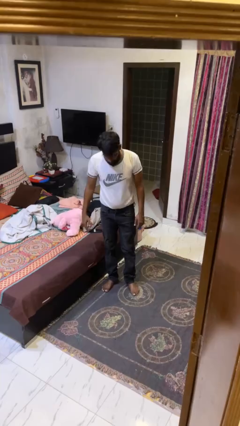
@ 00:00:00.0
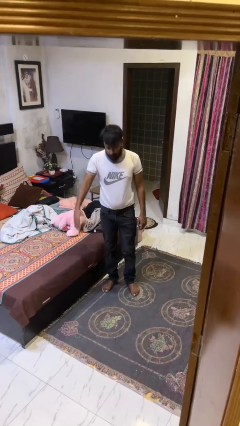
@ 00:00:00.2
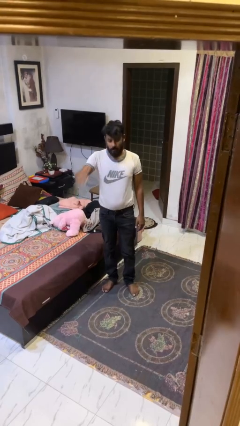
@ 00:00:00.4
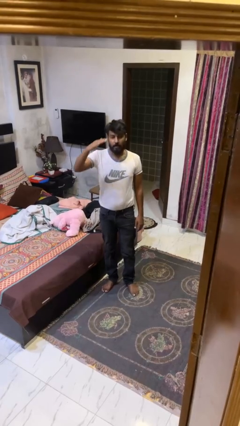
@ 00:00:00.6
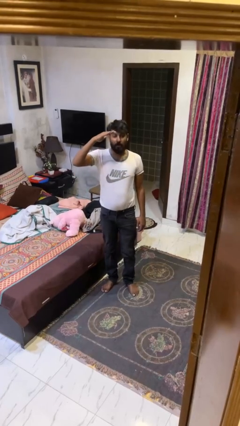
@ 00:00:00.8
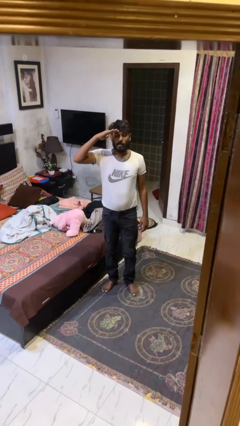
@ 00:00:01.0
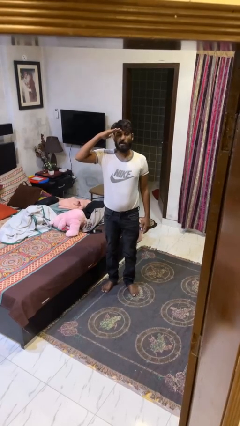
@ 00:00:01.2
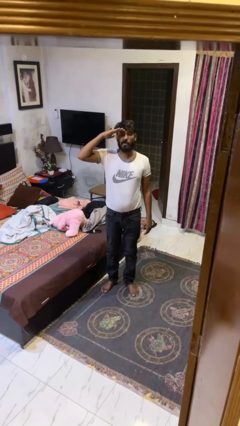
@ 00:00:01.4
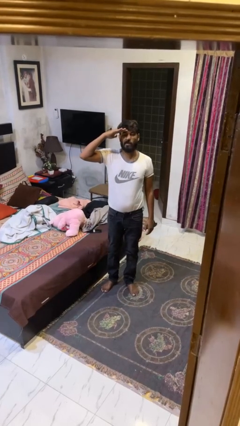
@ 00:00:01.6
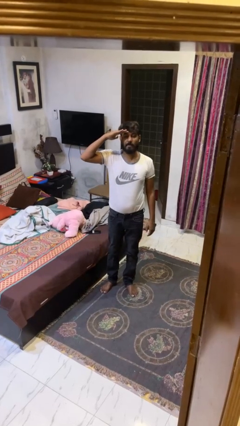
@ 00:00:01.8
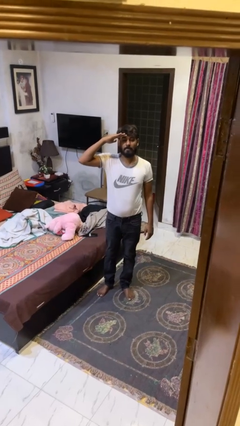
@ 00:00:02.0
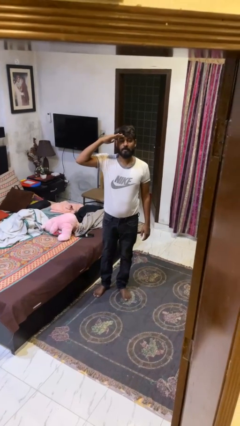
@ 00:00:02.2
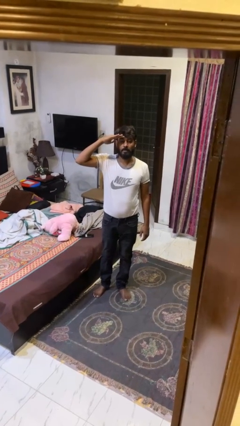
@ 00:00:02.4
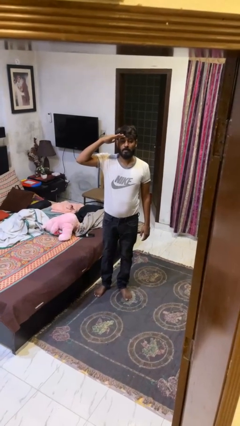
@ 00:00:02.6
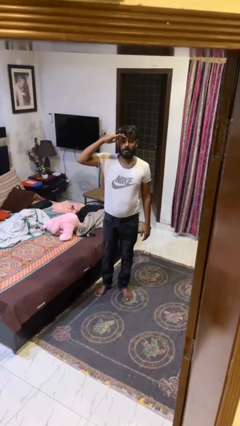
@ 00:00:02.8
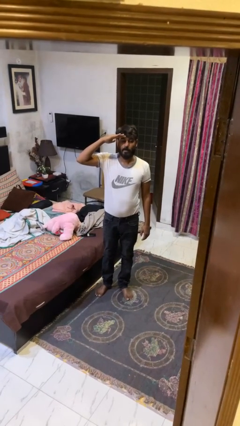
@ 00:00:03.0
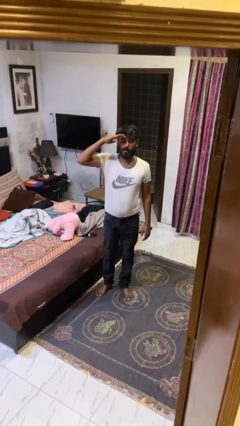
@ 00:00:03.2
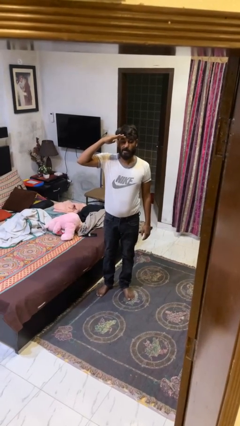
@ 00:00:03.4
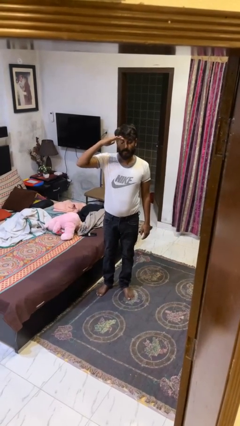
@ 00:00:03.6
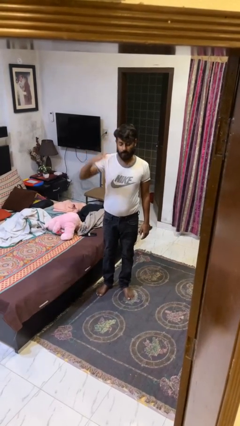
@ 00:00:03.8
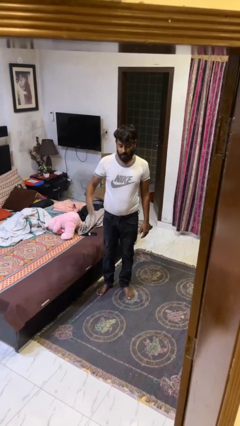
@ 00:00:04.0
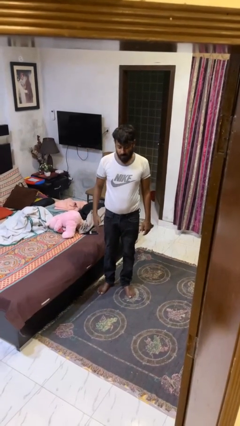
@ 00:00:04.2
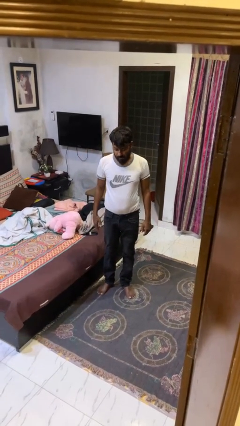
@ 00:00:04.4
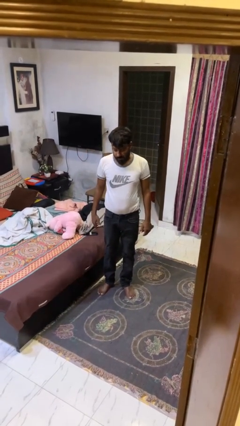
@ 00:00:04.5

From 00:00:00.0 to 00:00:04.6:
person salutes

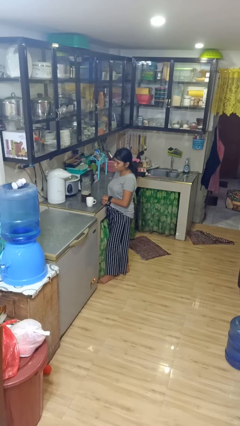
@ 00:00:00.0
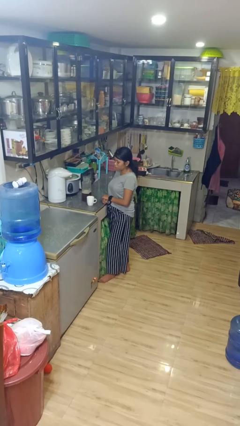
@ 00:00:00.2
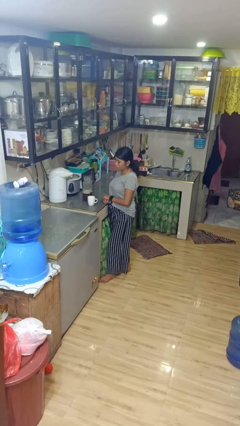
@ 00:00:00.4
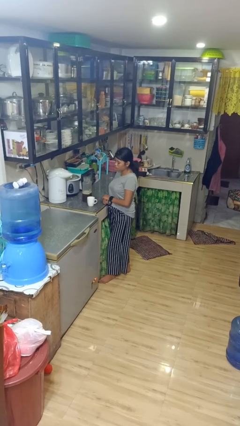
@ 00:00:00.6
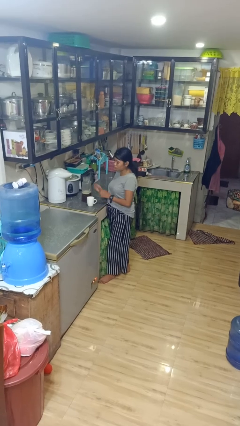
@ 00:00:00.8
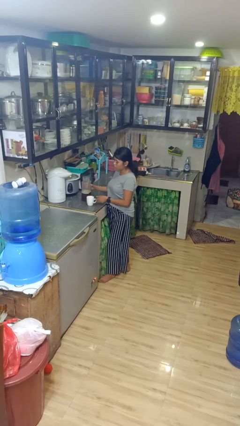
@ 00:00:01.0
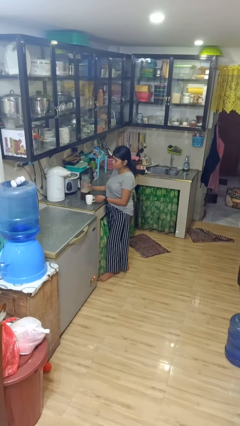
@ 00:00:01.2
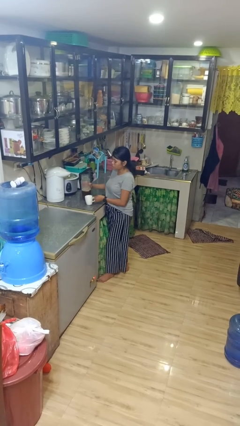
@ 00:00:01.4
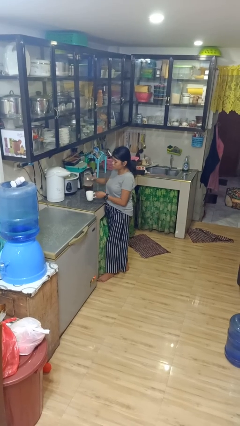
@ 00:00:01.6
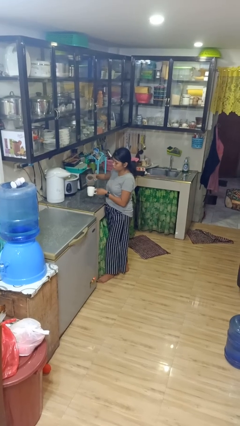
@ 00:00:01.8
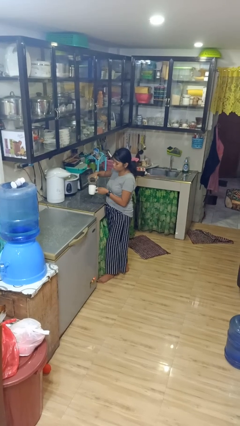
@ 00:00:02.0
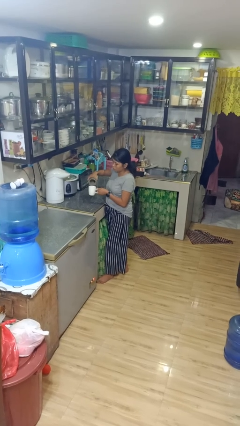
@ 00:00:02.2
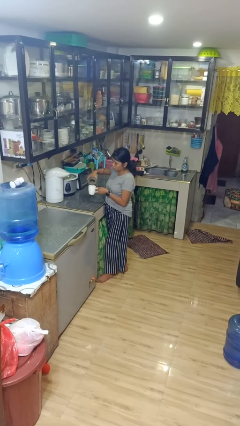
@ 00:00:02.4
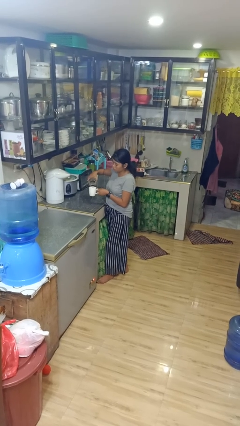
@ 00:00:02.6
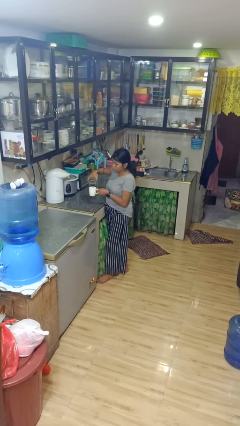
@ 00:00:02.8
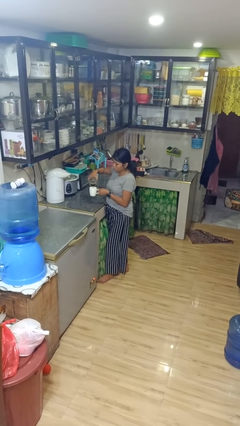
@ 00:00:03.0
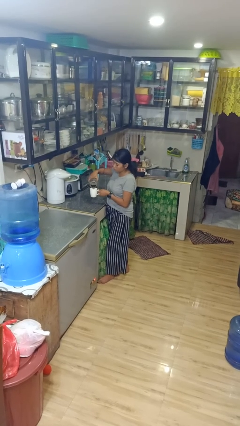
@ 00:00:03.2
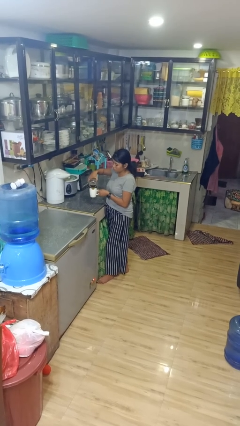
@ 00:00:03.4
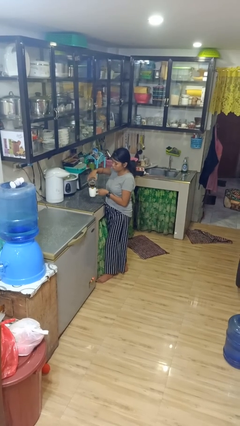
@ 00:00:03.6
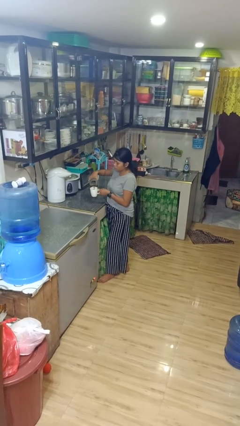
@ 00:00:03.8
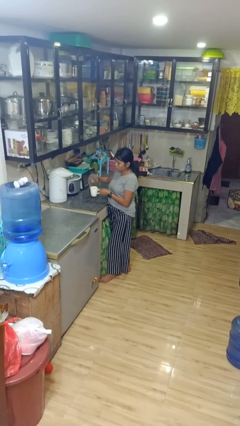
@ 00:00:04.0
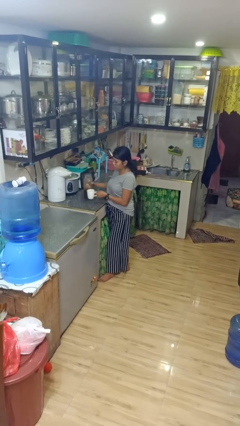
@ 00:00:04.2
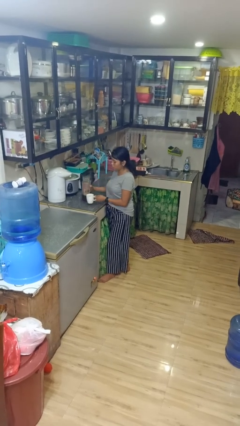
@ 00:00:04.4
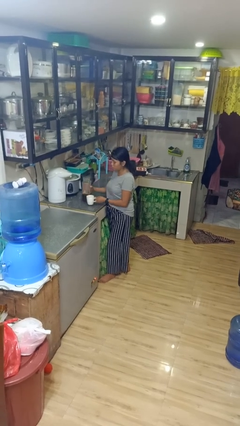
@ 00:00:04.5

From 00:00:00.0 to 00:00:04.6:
person pours coffee into mug

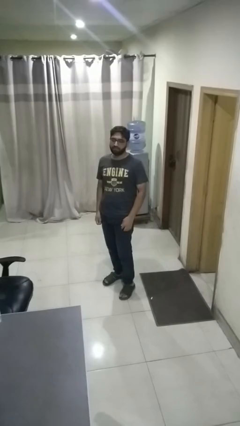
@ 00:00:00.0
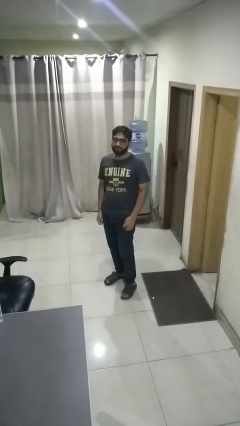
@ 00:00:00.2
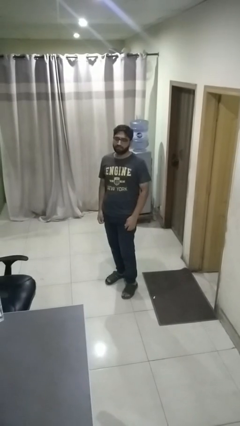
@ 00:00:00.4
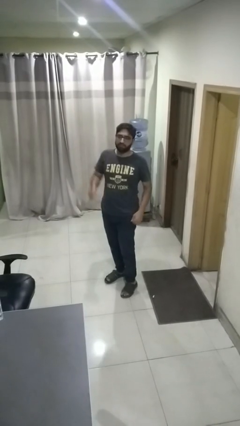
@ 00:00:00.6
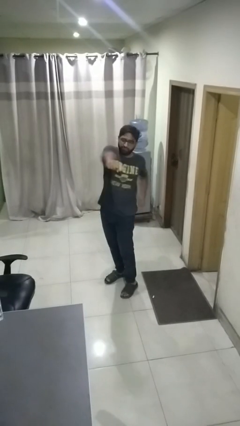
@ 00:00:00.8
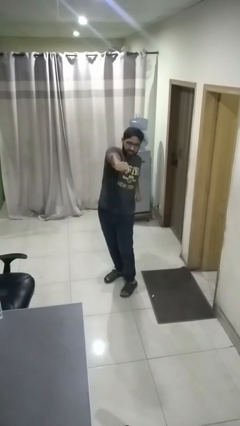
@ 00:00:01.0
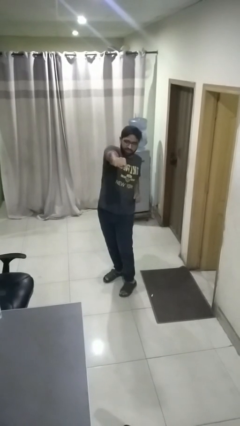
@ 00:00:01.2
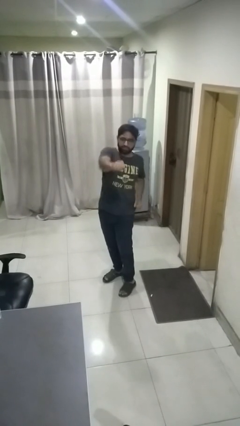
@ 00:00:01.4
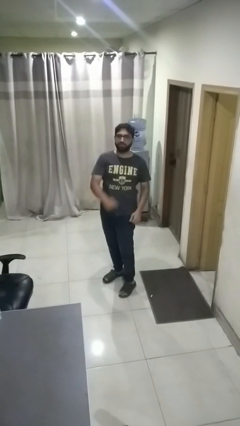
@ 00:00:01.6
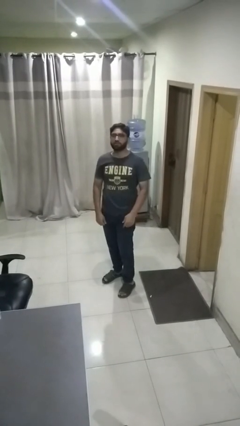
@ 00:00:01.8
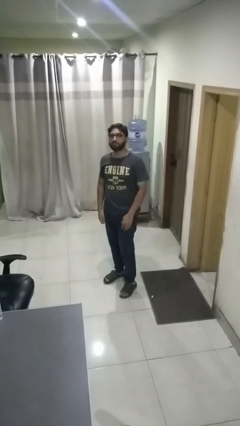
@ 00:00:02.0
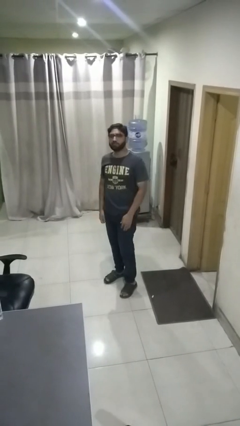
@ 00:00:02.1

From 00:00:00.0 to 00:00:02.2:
person punches

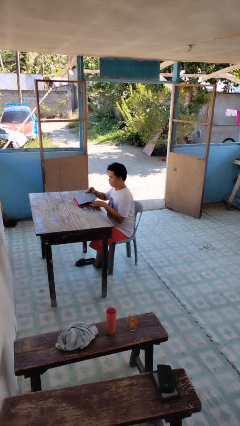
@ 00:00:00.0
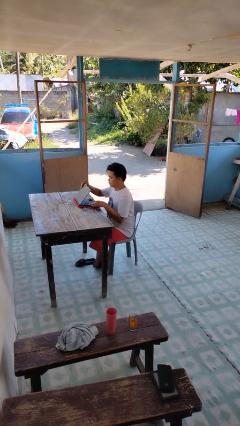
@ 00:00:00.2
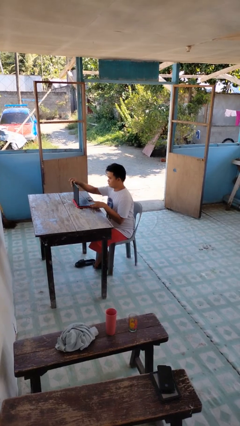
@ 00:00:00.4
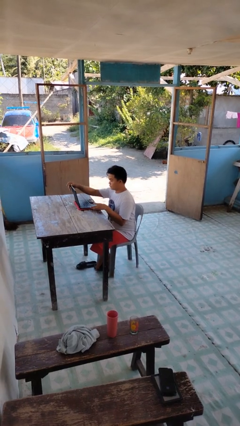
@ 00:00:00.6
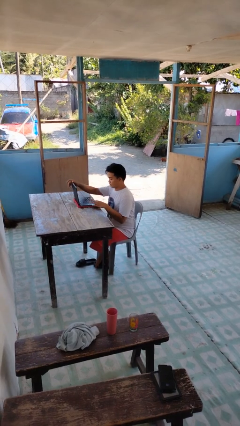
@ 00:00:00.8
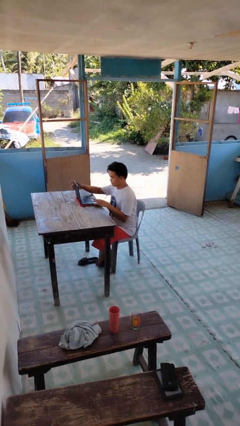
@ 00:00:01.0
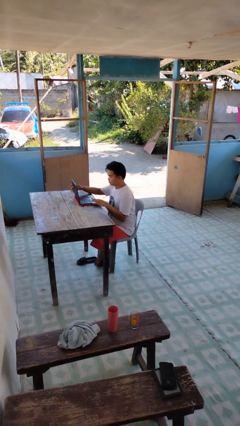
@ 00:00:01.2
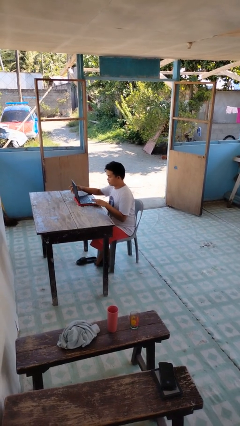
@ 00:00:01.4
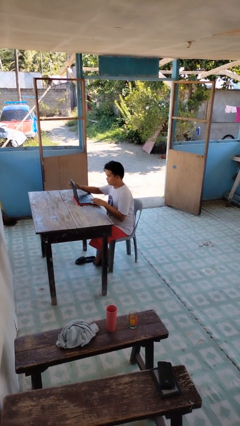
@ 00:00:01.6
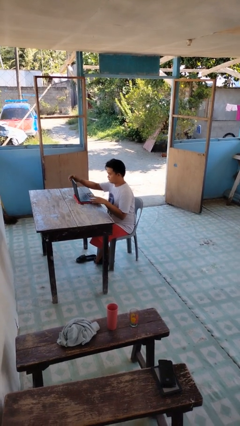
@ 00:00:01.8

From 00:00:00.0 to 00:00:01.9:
person opens laptop

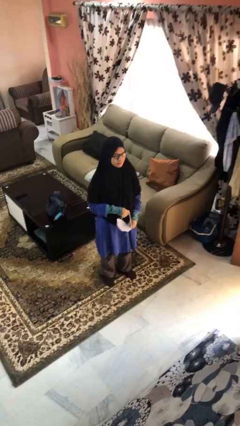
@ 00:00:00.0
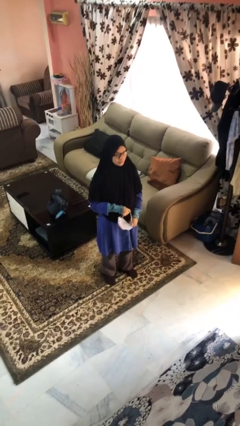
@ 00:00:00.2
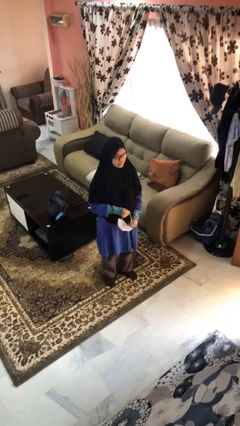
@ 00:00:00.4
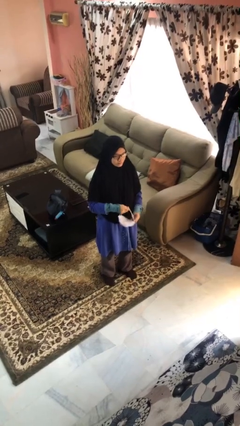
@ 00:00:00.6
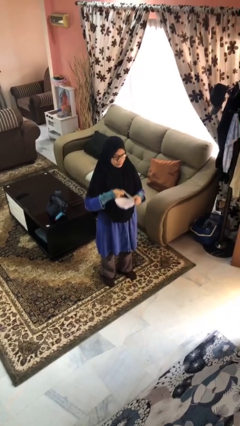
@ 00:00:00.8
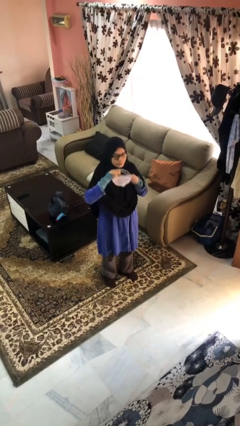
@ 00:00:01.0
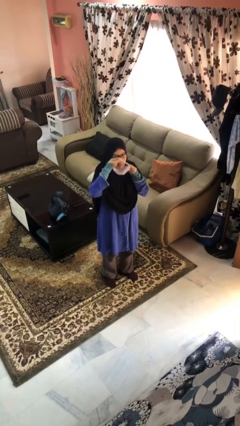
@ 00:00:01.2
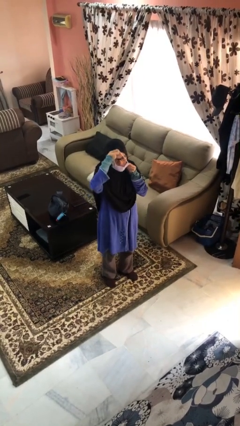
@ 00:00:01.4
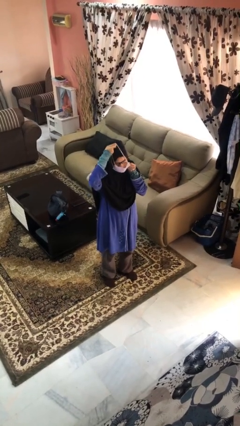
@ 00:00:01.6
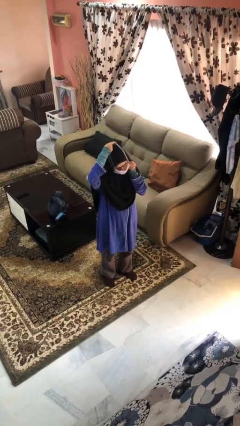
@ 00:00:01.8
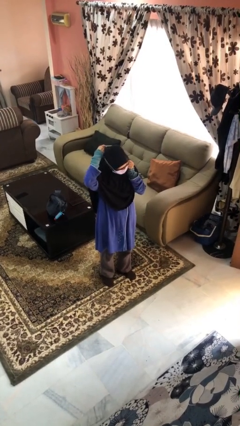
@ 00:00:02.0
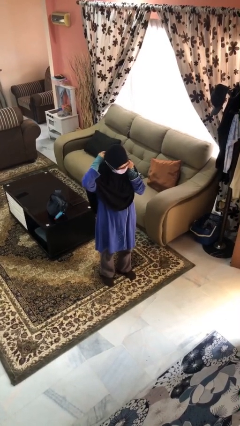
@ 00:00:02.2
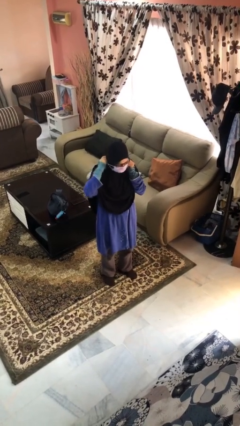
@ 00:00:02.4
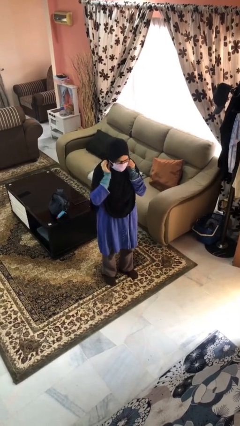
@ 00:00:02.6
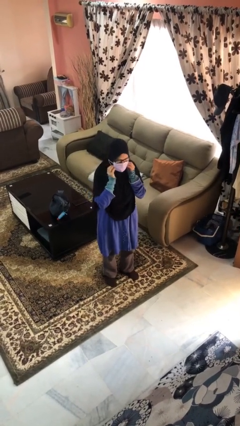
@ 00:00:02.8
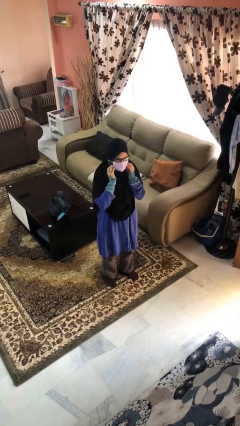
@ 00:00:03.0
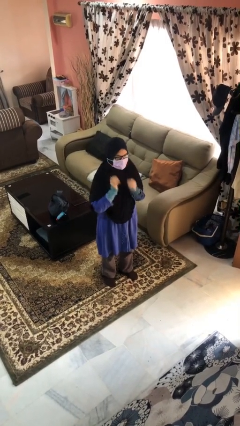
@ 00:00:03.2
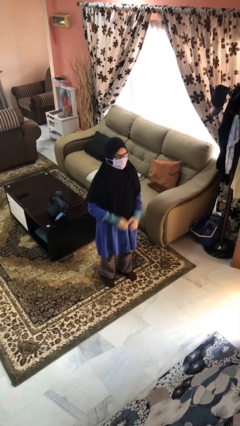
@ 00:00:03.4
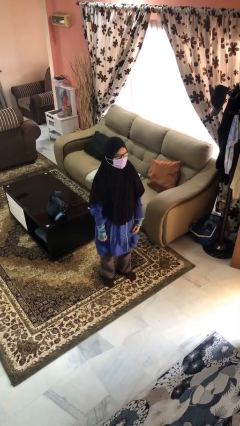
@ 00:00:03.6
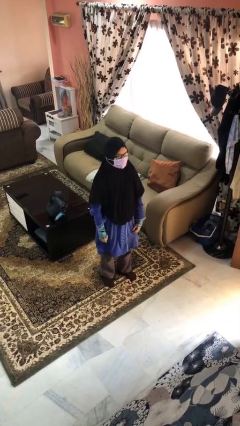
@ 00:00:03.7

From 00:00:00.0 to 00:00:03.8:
person puts on facemask
